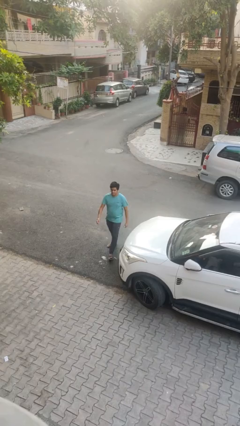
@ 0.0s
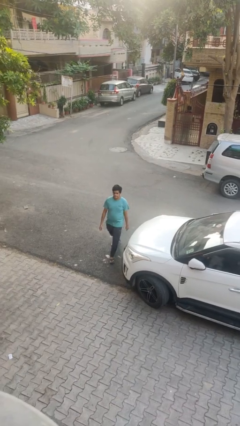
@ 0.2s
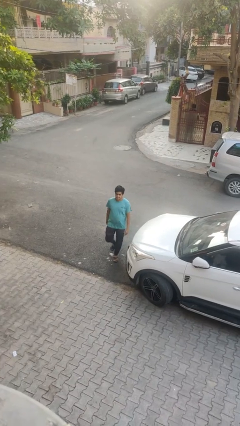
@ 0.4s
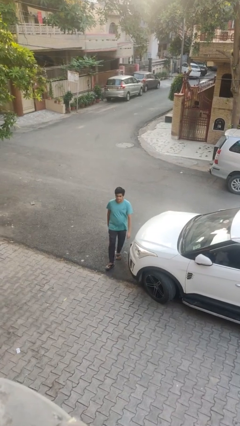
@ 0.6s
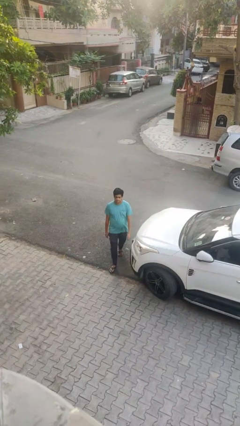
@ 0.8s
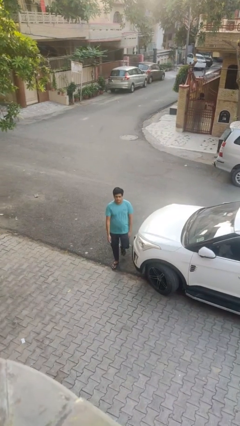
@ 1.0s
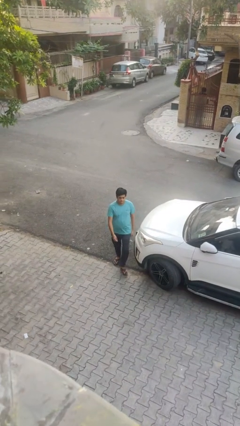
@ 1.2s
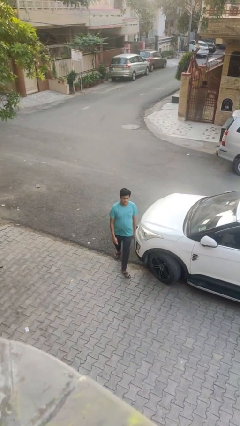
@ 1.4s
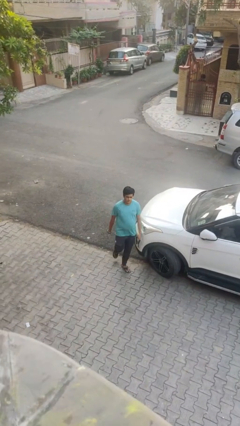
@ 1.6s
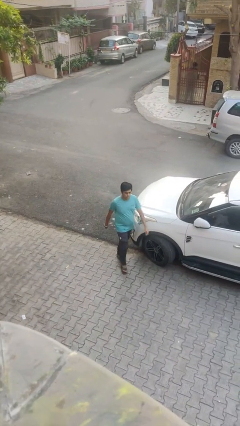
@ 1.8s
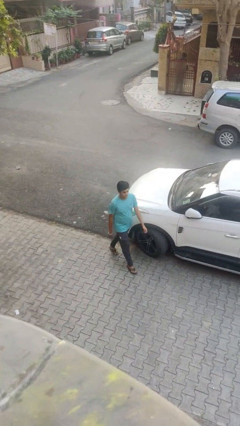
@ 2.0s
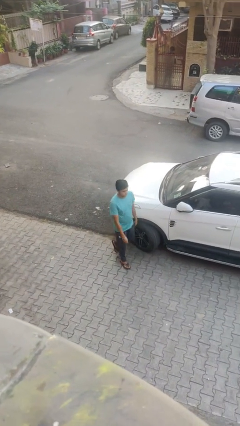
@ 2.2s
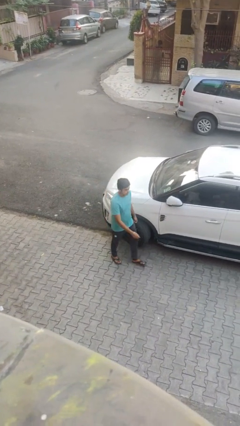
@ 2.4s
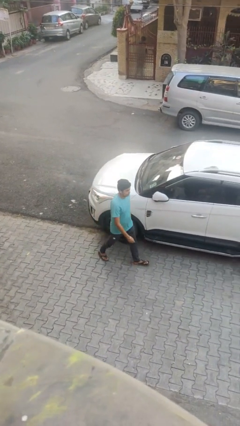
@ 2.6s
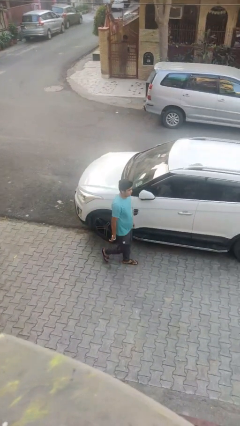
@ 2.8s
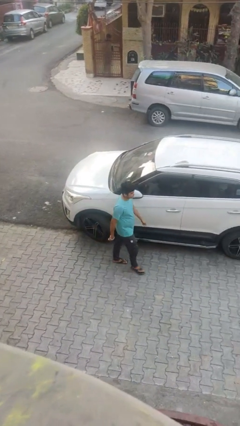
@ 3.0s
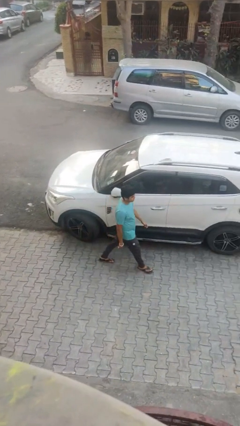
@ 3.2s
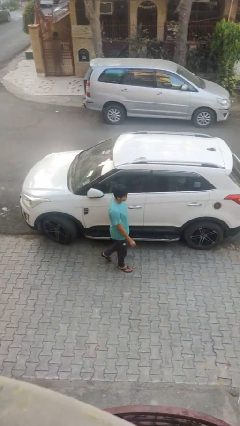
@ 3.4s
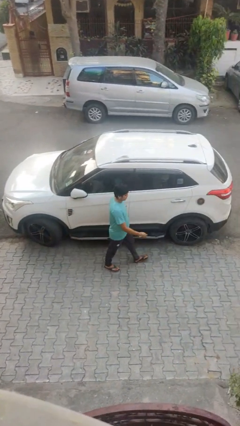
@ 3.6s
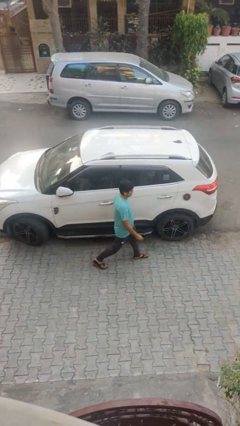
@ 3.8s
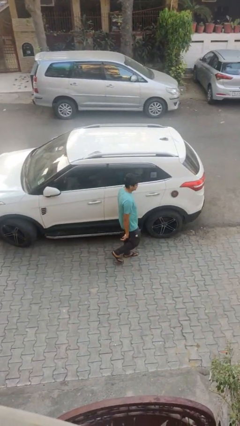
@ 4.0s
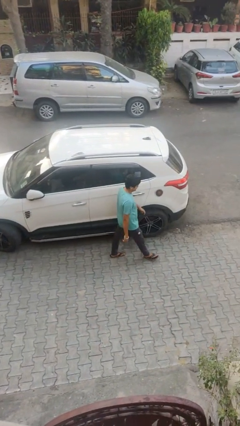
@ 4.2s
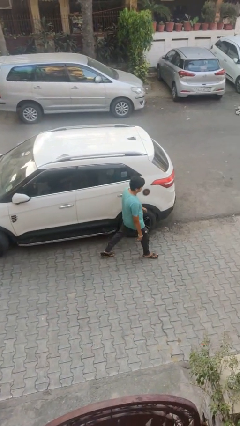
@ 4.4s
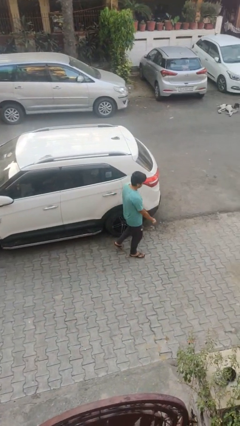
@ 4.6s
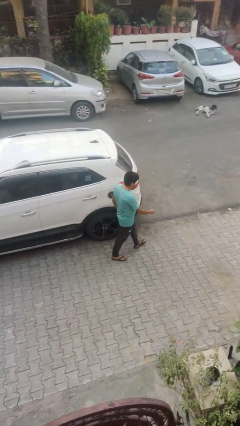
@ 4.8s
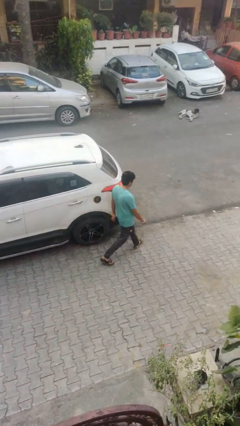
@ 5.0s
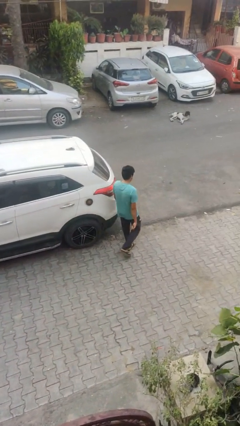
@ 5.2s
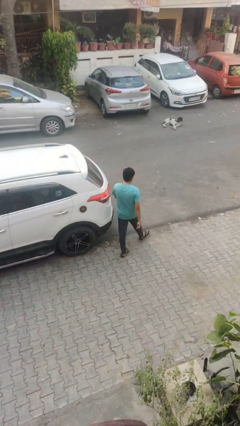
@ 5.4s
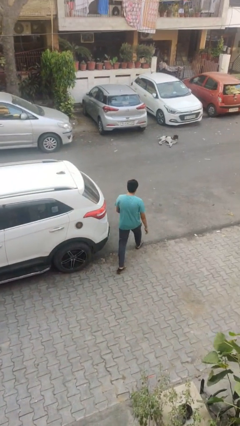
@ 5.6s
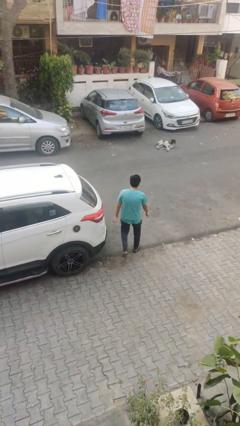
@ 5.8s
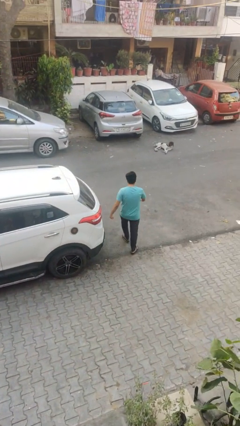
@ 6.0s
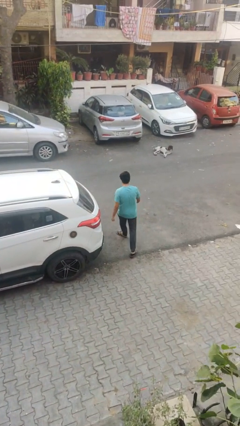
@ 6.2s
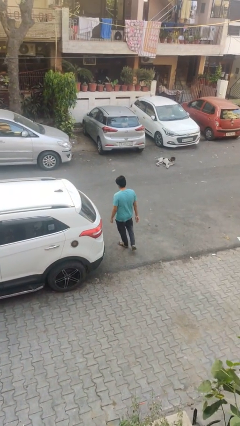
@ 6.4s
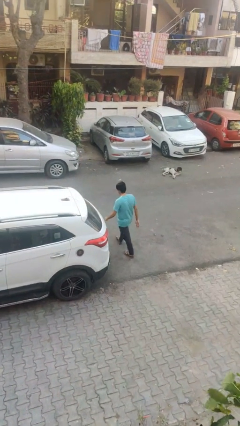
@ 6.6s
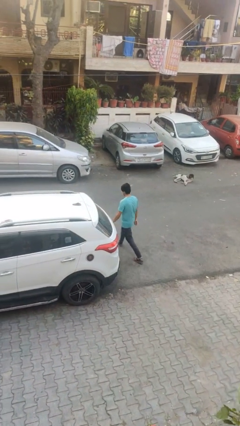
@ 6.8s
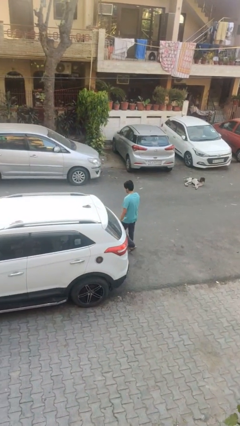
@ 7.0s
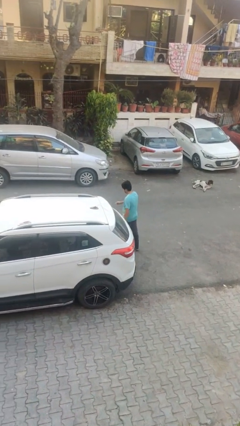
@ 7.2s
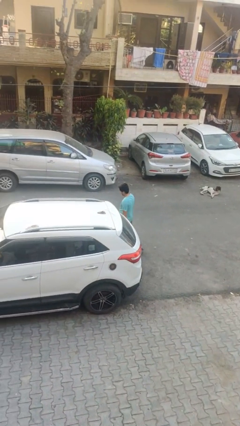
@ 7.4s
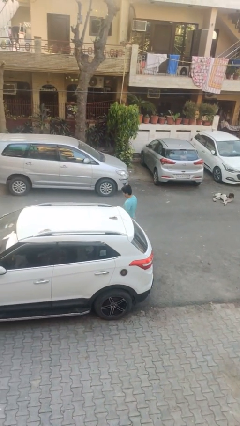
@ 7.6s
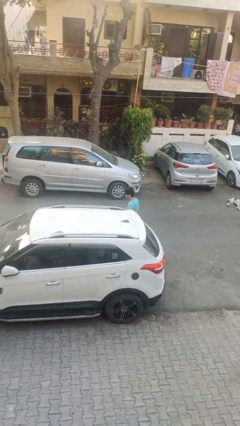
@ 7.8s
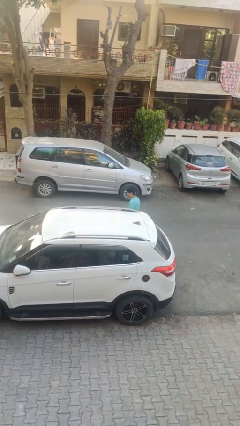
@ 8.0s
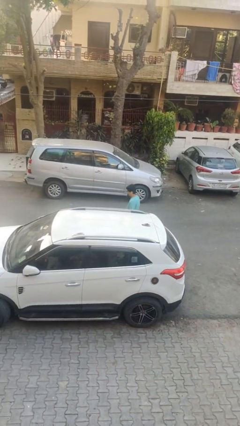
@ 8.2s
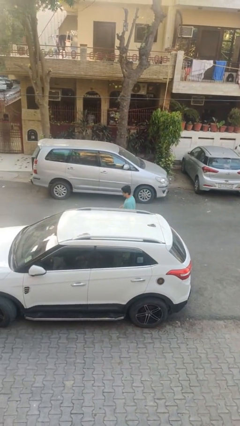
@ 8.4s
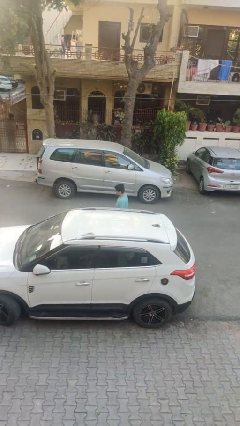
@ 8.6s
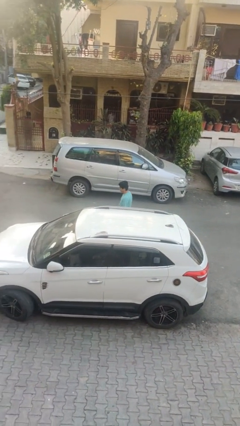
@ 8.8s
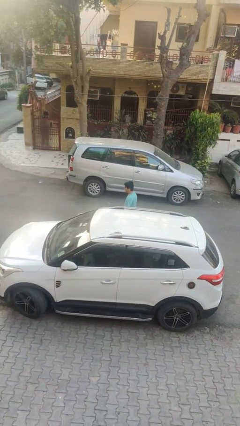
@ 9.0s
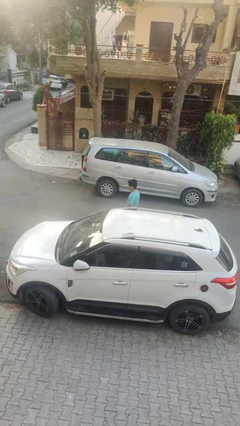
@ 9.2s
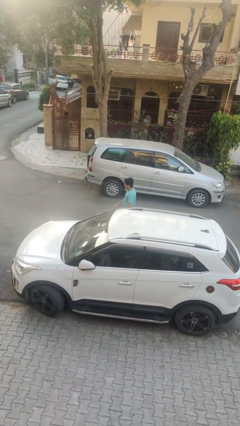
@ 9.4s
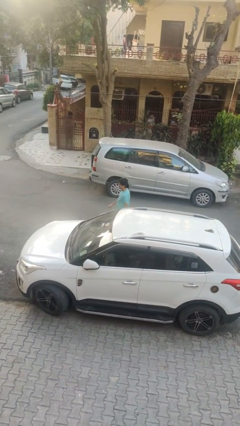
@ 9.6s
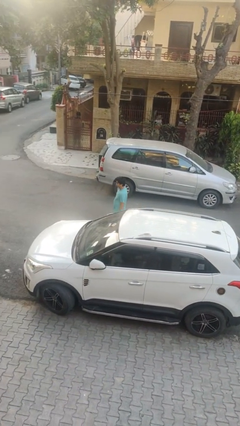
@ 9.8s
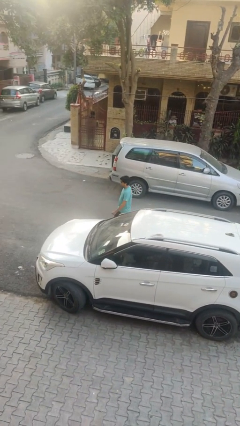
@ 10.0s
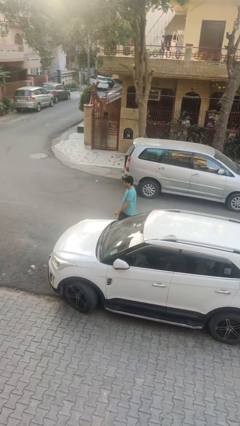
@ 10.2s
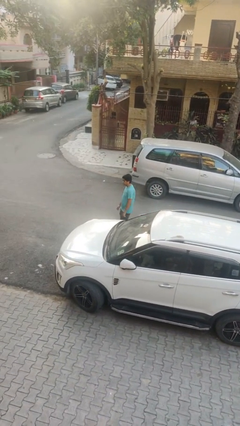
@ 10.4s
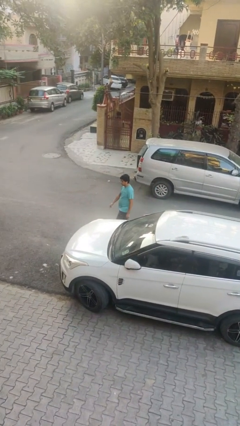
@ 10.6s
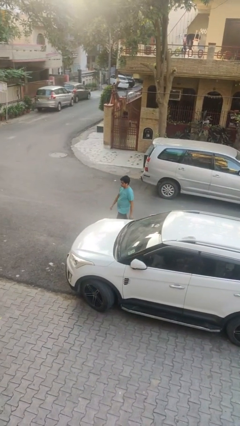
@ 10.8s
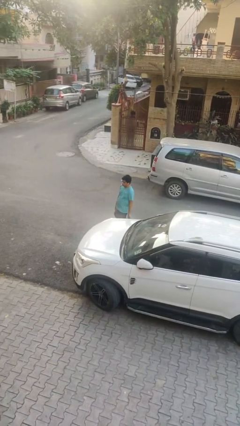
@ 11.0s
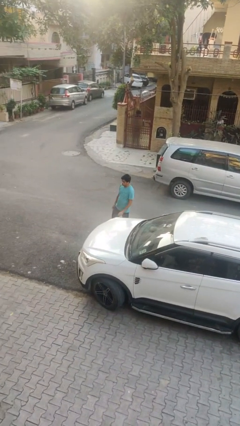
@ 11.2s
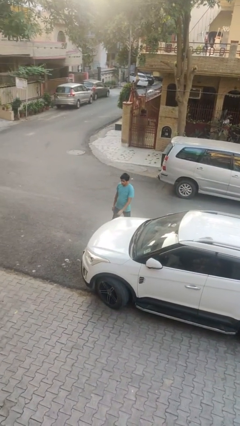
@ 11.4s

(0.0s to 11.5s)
person walks around car

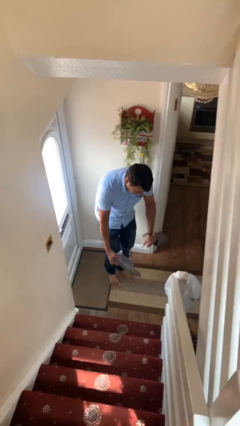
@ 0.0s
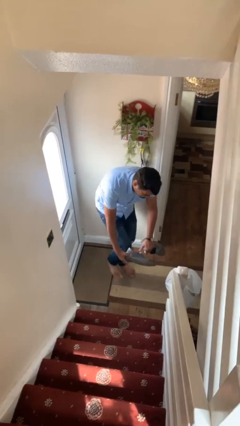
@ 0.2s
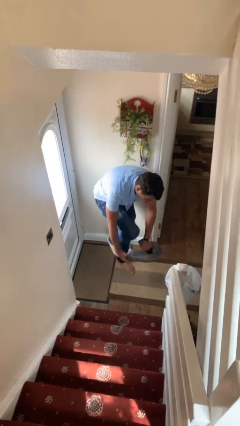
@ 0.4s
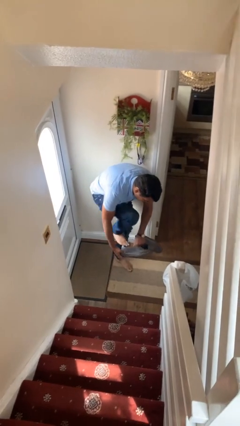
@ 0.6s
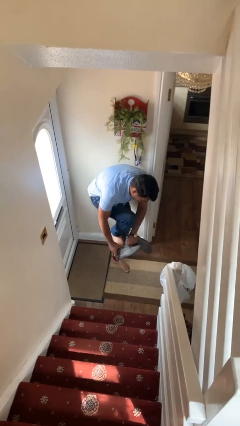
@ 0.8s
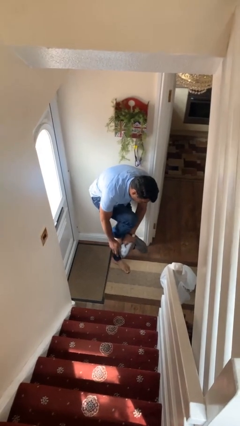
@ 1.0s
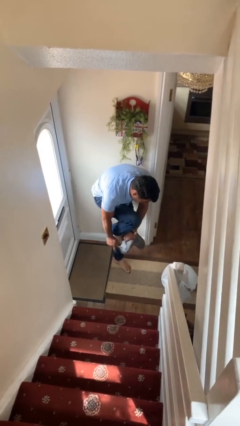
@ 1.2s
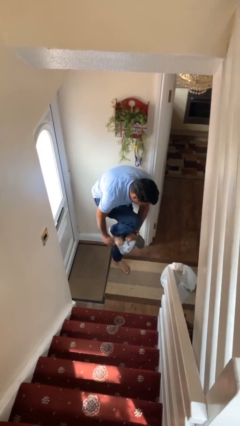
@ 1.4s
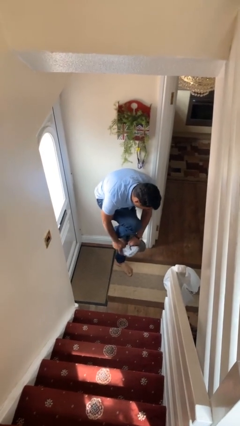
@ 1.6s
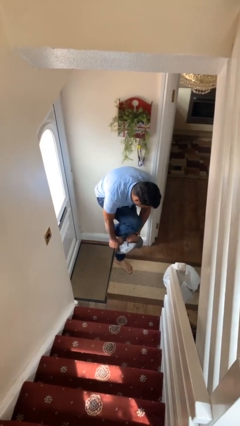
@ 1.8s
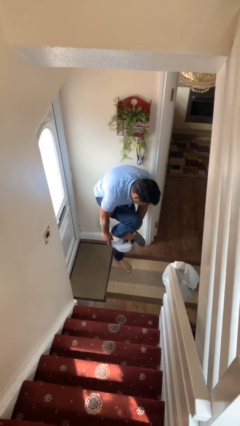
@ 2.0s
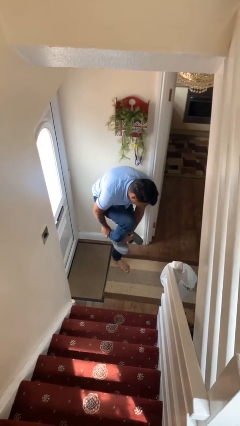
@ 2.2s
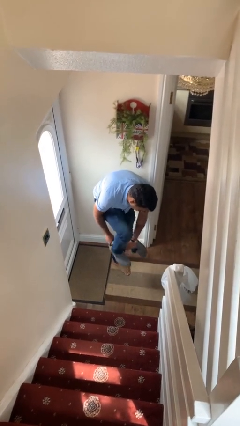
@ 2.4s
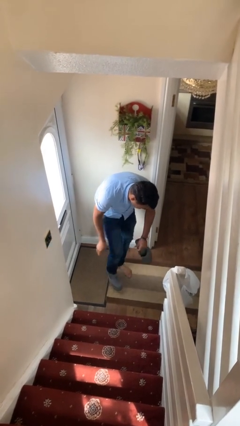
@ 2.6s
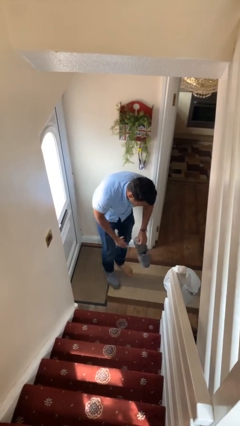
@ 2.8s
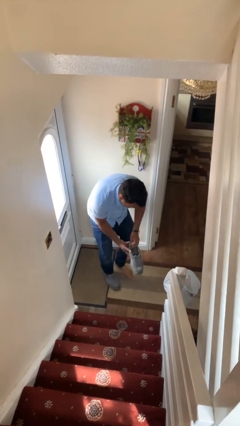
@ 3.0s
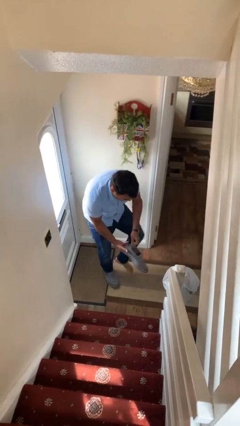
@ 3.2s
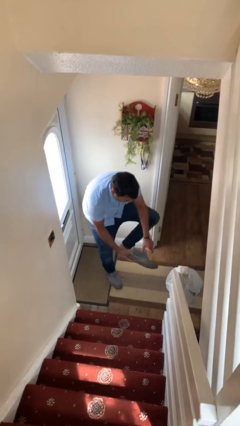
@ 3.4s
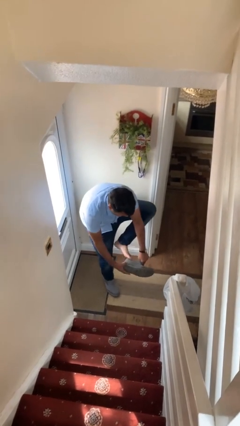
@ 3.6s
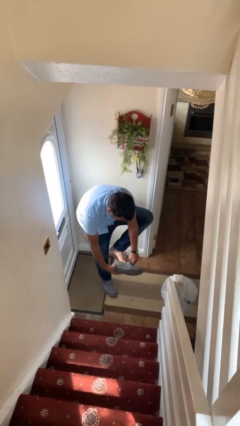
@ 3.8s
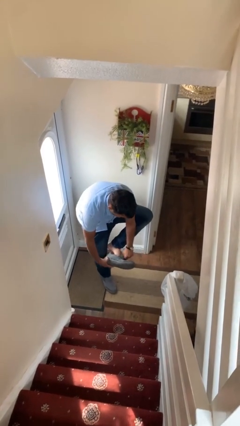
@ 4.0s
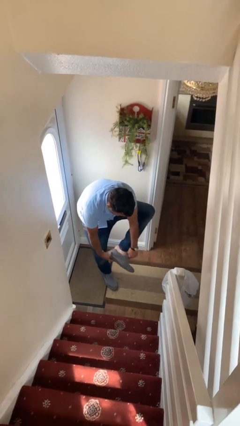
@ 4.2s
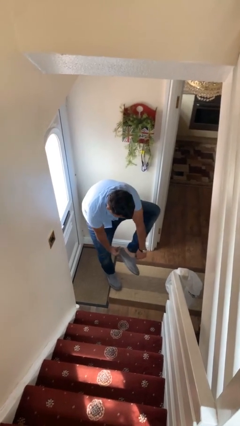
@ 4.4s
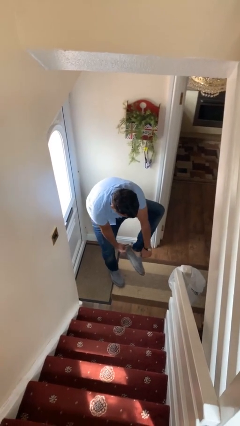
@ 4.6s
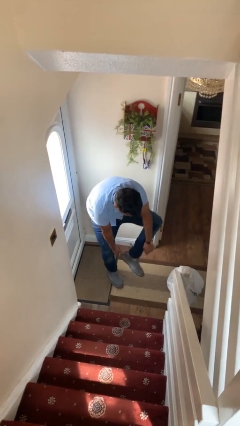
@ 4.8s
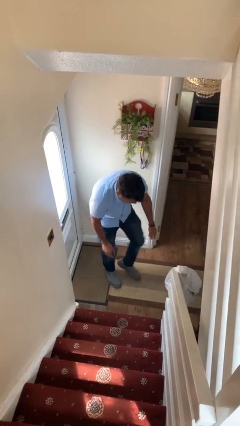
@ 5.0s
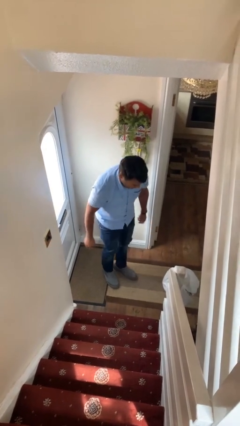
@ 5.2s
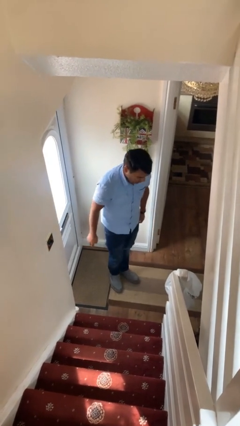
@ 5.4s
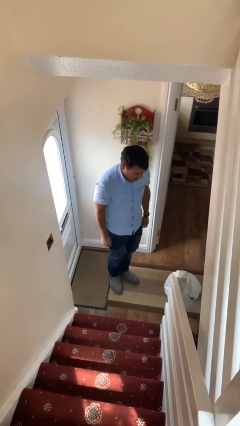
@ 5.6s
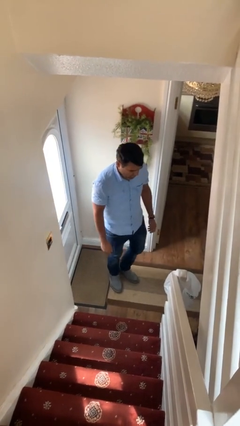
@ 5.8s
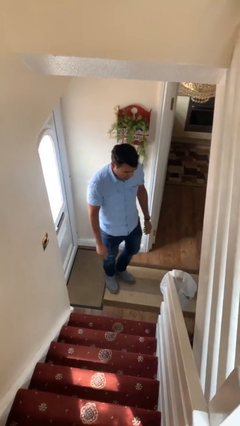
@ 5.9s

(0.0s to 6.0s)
person puts on shoes

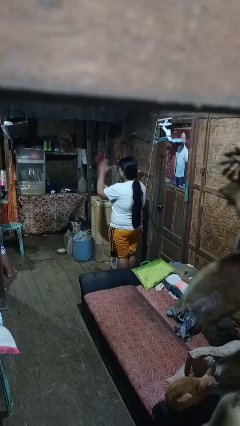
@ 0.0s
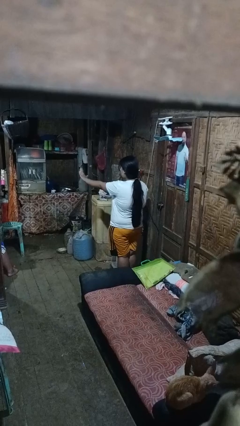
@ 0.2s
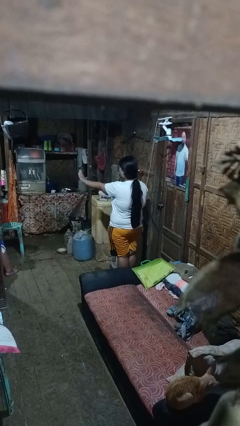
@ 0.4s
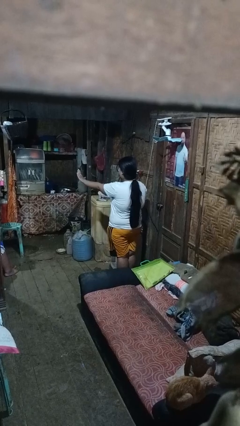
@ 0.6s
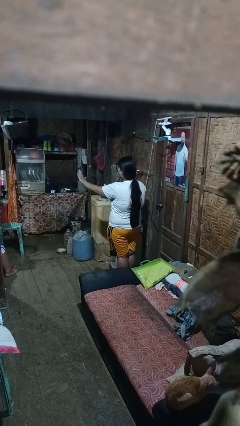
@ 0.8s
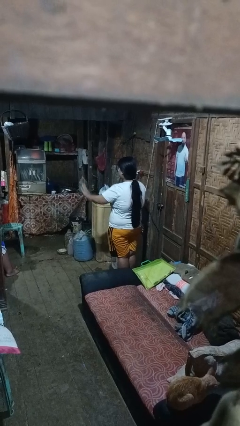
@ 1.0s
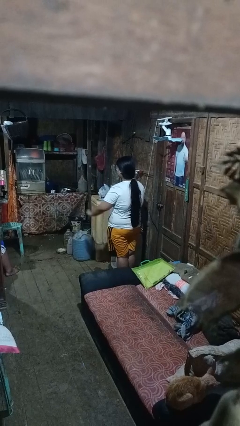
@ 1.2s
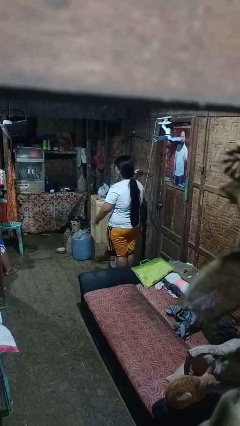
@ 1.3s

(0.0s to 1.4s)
person gestures stop
